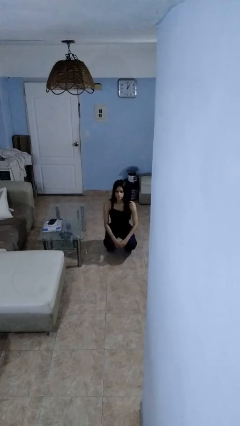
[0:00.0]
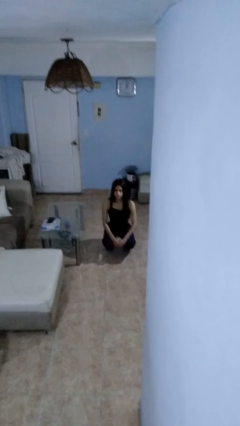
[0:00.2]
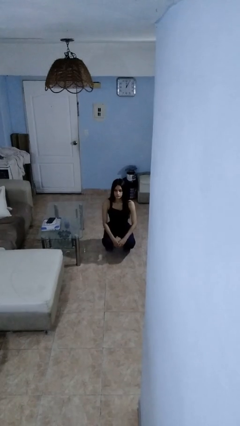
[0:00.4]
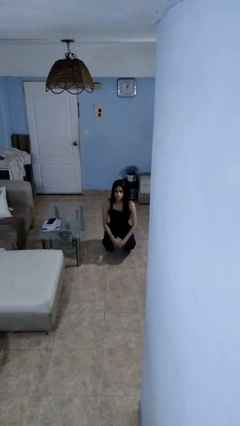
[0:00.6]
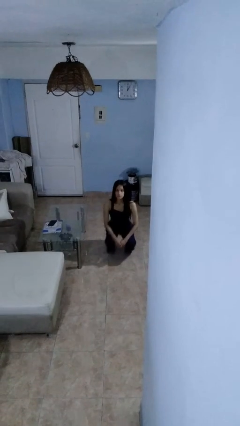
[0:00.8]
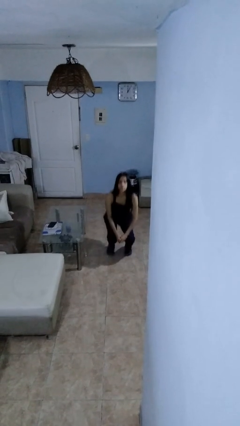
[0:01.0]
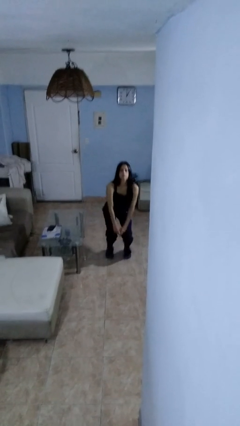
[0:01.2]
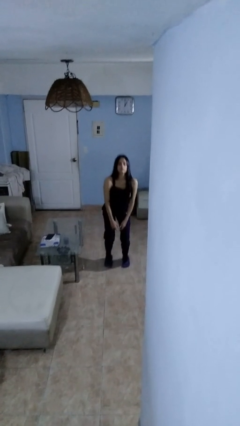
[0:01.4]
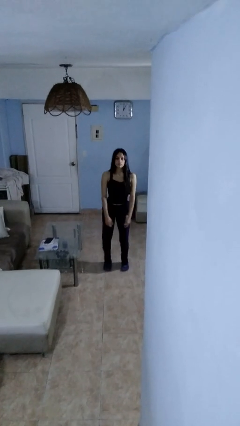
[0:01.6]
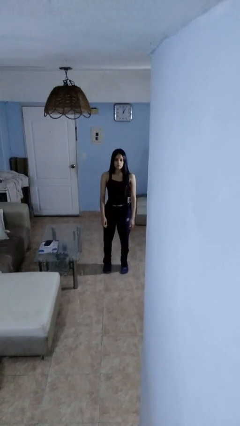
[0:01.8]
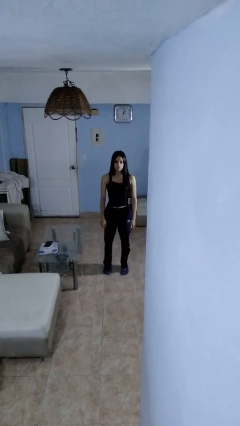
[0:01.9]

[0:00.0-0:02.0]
person stands up

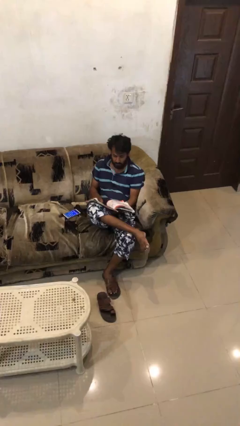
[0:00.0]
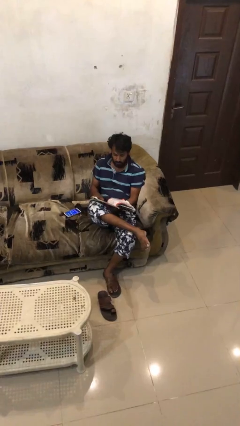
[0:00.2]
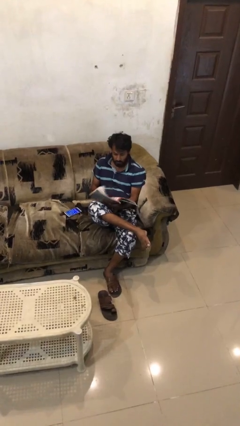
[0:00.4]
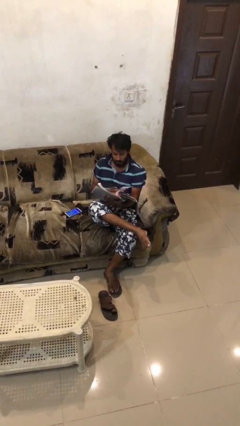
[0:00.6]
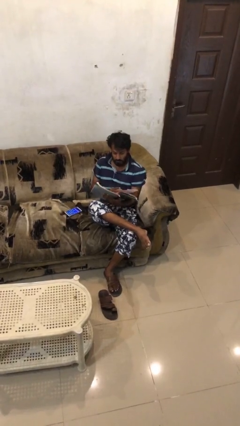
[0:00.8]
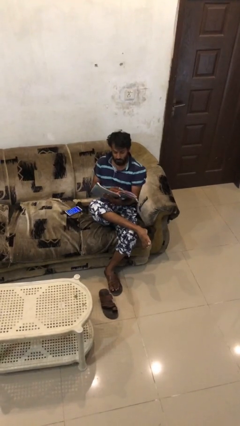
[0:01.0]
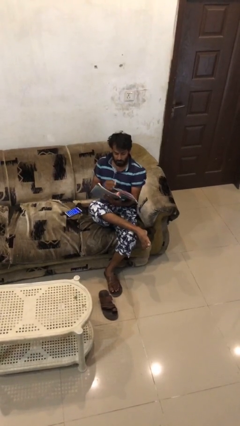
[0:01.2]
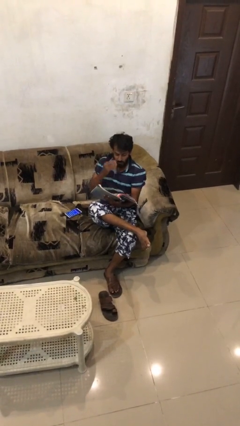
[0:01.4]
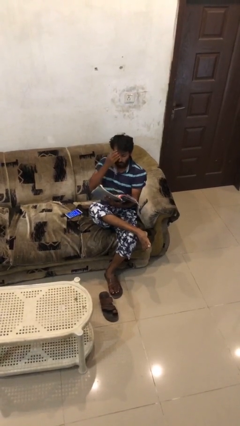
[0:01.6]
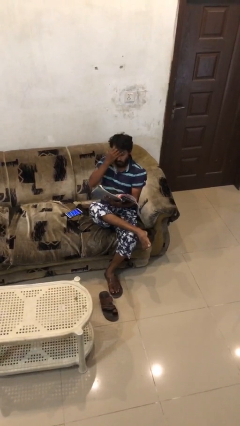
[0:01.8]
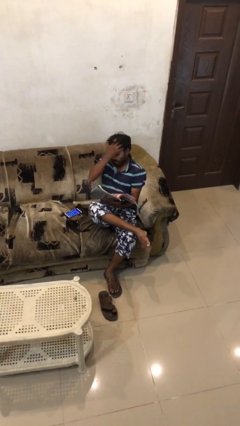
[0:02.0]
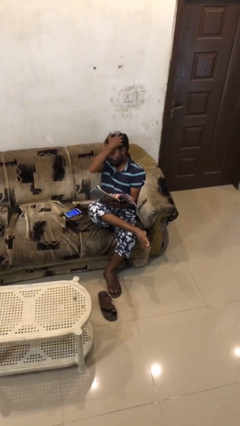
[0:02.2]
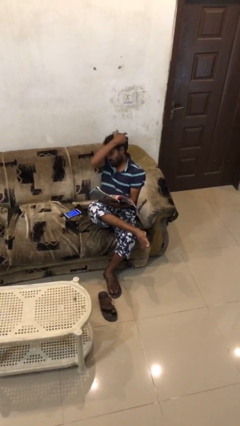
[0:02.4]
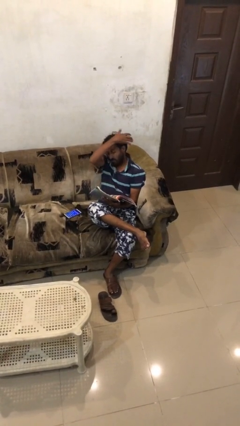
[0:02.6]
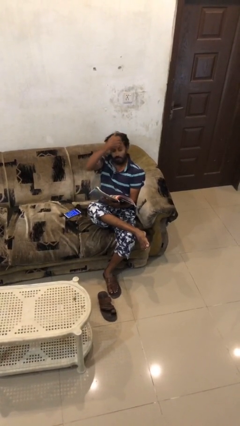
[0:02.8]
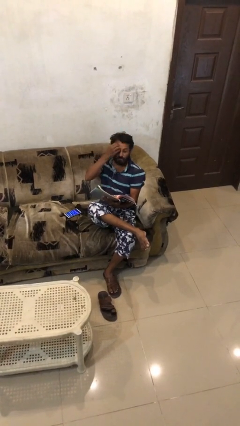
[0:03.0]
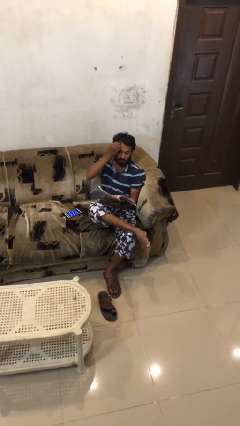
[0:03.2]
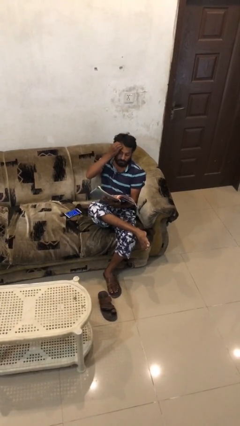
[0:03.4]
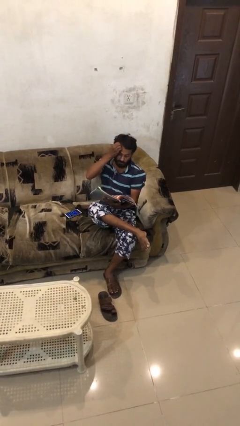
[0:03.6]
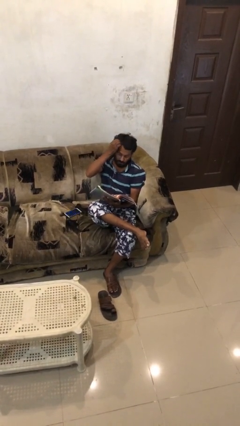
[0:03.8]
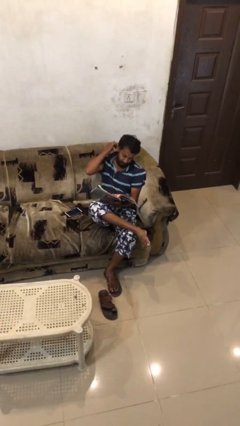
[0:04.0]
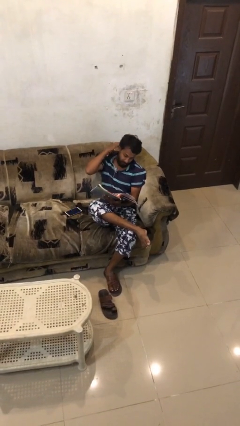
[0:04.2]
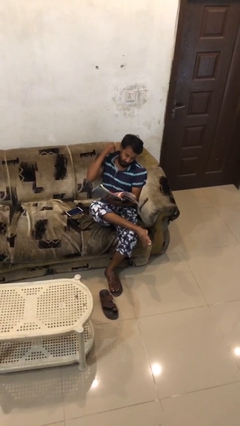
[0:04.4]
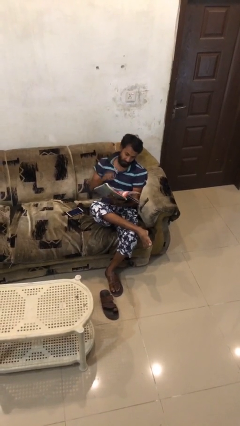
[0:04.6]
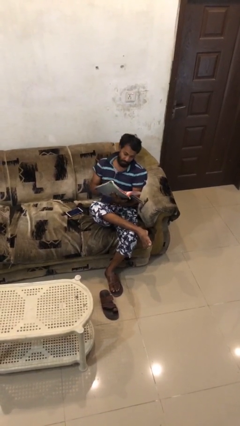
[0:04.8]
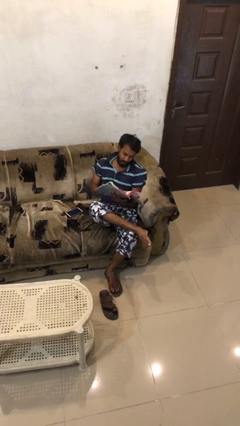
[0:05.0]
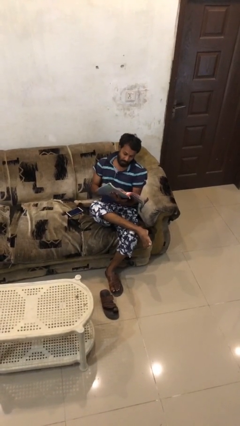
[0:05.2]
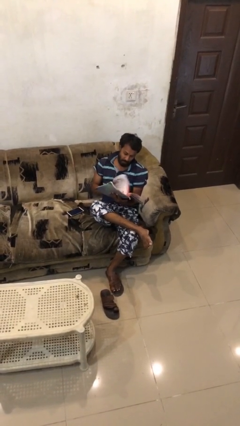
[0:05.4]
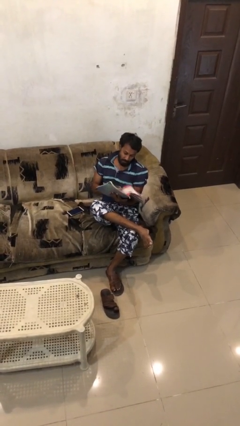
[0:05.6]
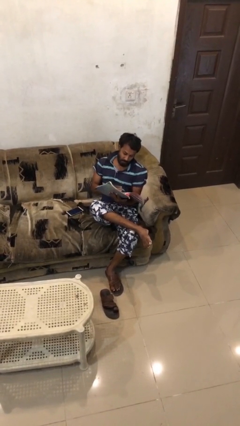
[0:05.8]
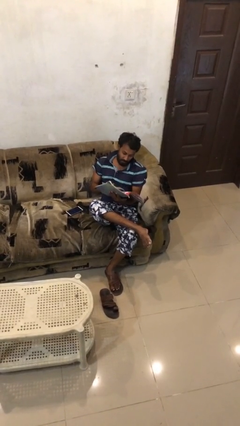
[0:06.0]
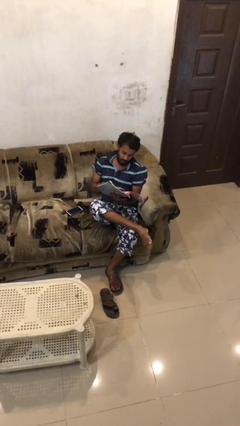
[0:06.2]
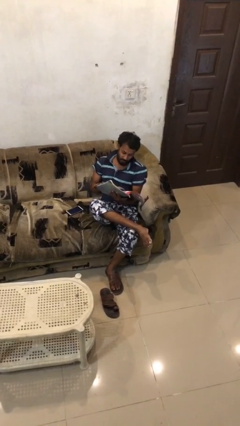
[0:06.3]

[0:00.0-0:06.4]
person reads document

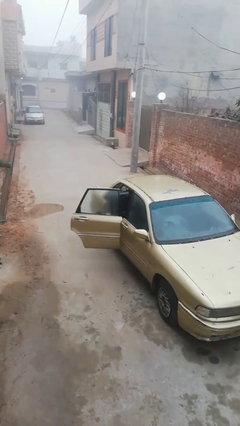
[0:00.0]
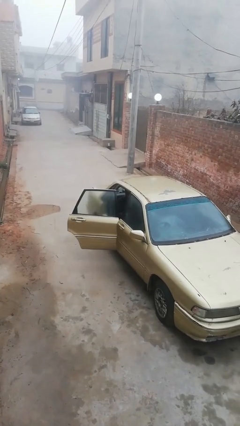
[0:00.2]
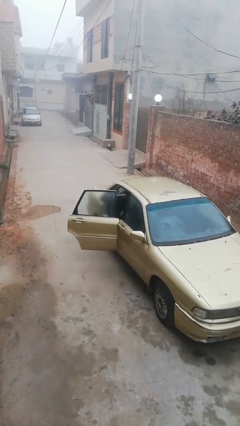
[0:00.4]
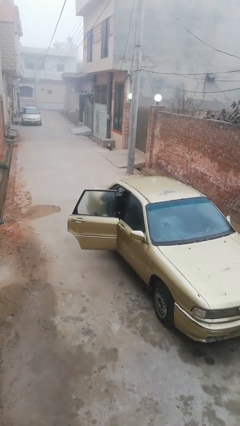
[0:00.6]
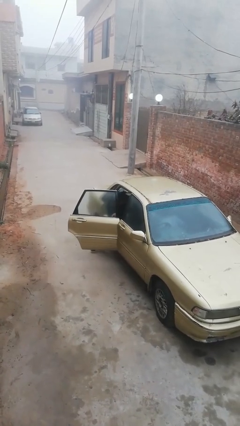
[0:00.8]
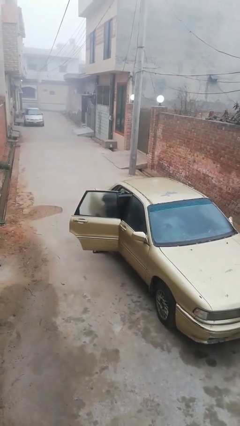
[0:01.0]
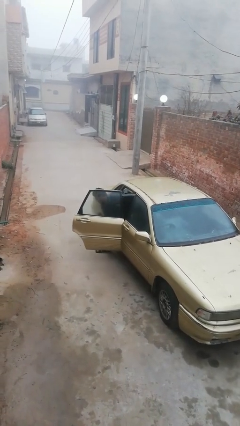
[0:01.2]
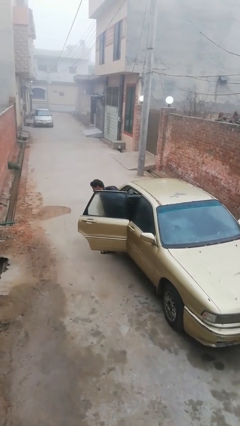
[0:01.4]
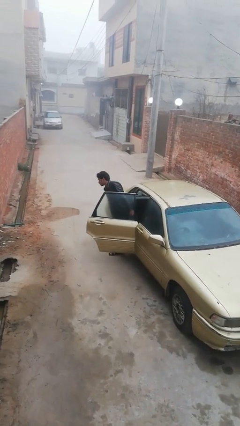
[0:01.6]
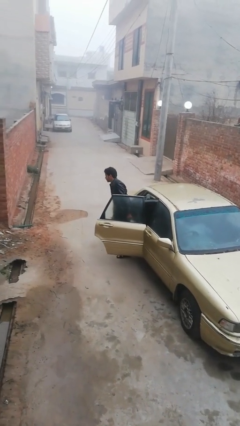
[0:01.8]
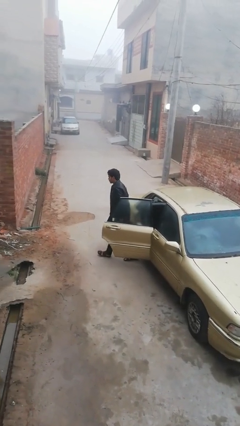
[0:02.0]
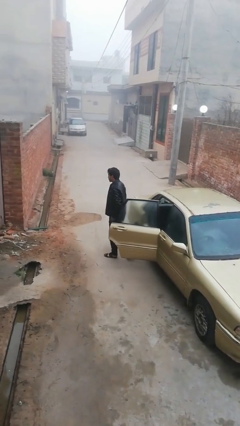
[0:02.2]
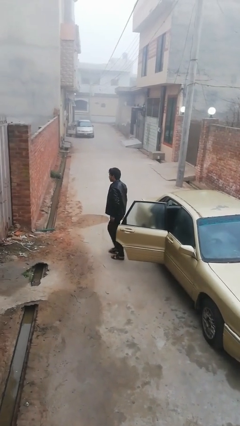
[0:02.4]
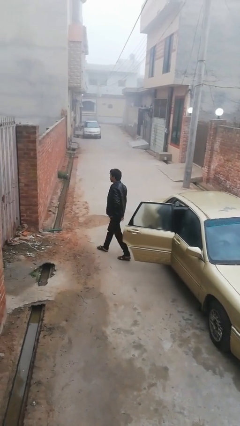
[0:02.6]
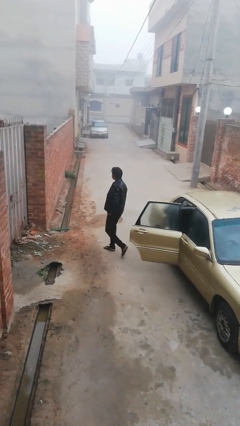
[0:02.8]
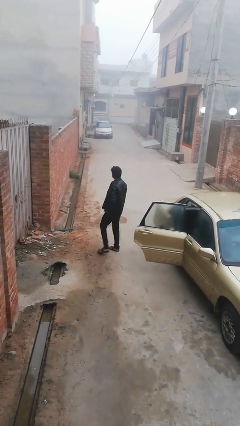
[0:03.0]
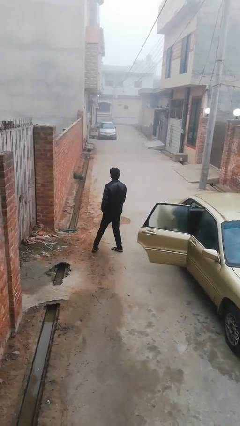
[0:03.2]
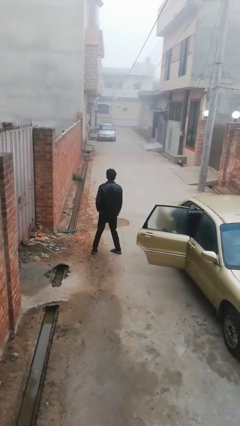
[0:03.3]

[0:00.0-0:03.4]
person exits car

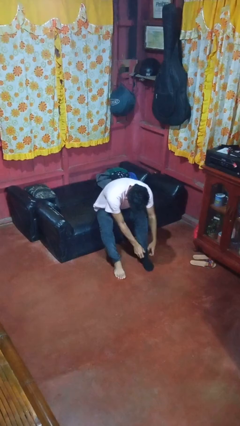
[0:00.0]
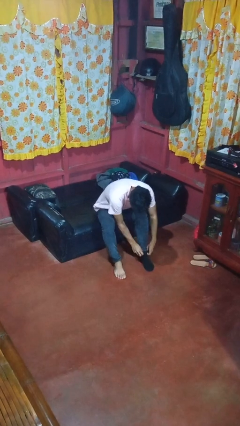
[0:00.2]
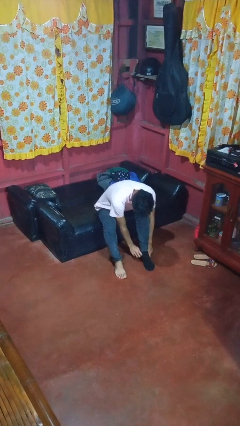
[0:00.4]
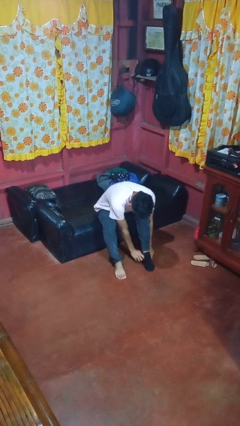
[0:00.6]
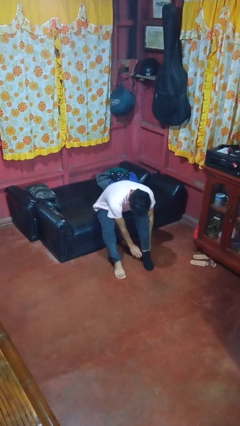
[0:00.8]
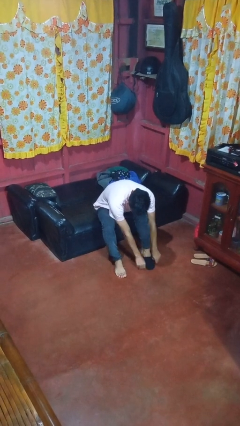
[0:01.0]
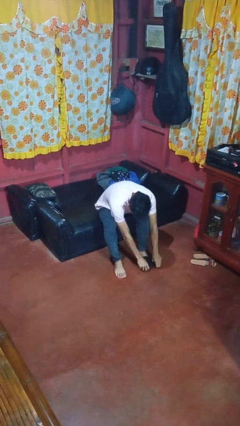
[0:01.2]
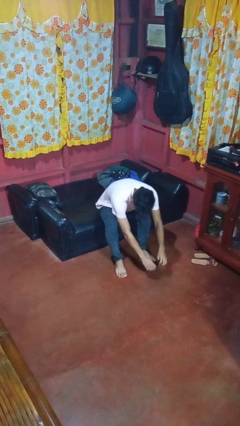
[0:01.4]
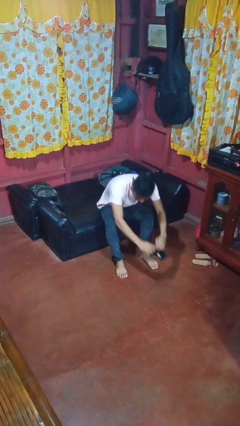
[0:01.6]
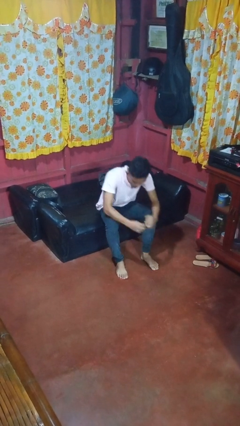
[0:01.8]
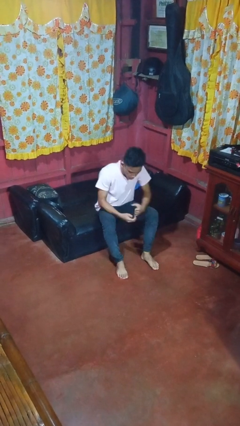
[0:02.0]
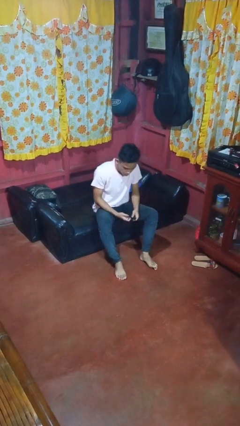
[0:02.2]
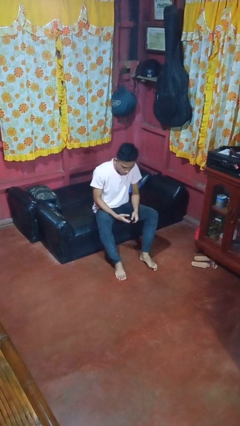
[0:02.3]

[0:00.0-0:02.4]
person takes off socks

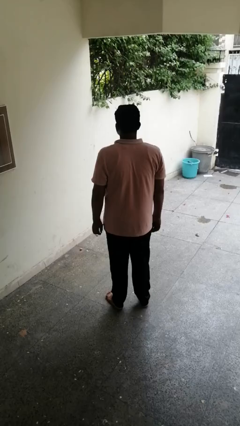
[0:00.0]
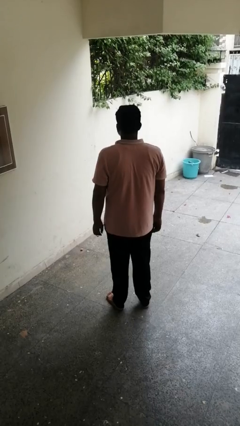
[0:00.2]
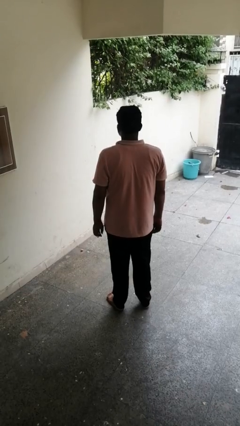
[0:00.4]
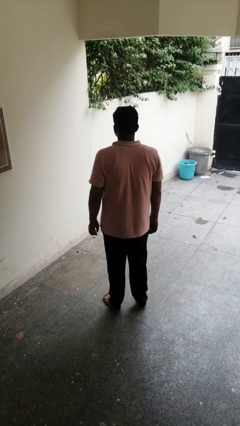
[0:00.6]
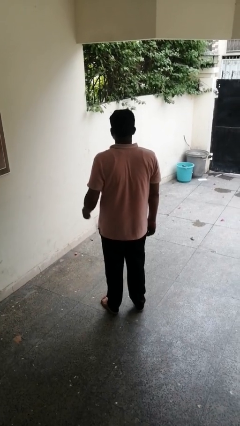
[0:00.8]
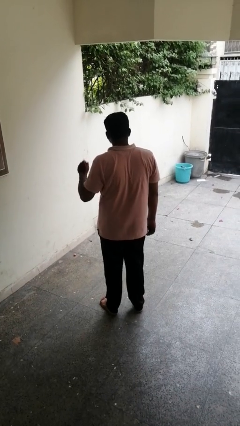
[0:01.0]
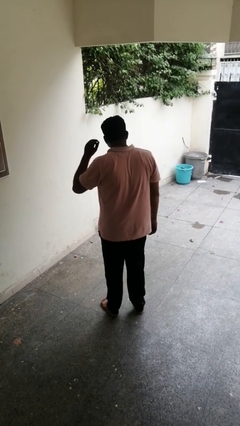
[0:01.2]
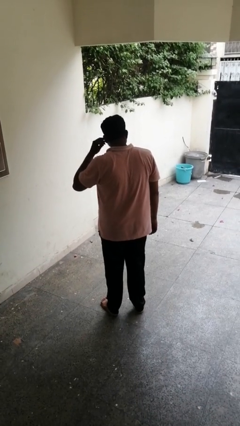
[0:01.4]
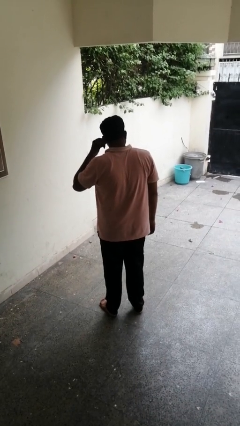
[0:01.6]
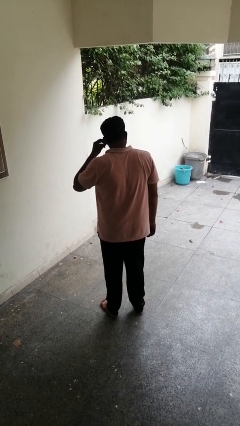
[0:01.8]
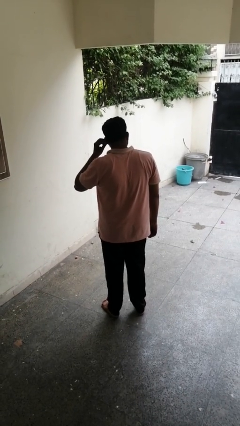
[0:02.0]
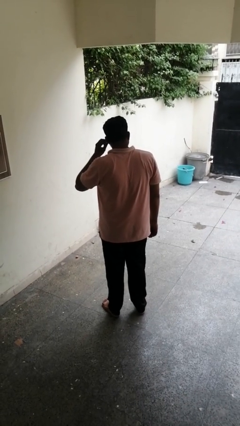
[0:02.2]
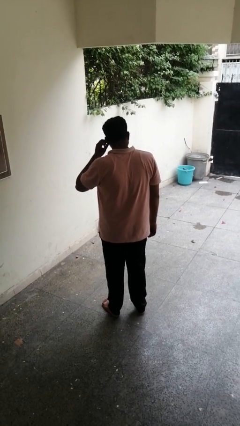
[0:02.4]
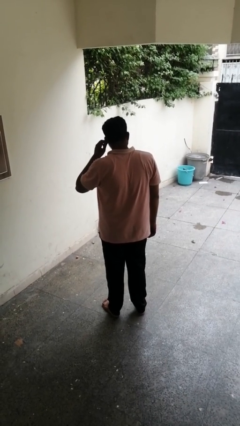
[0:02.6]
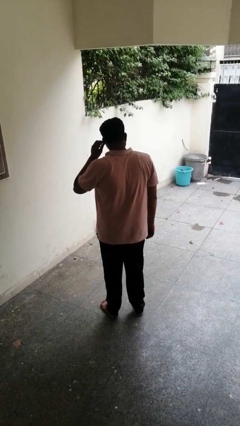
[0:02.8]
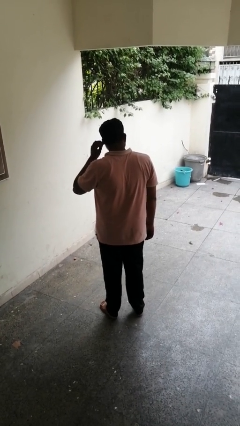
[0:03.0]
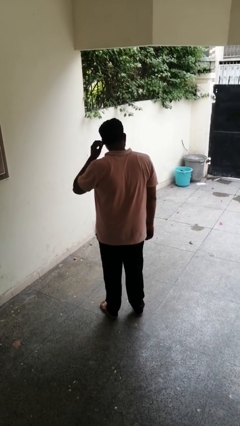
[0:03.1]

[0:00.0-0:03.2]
person touches earlobe

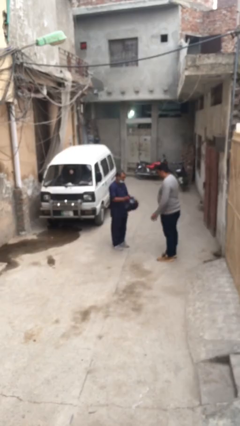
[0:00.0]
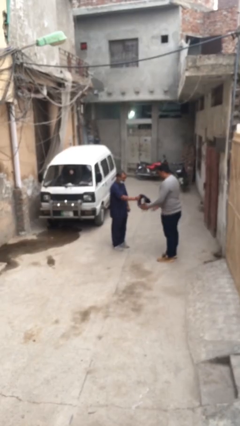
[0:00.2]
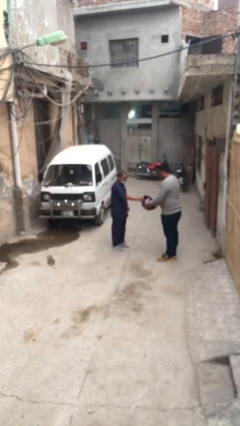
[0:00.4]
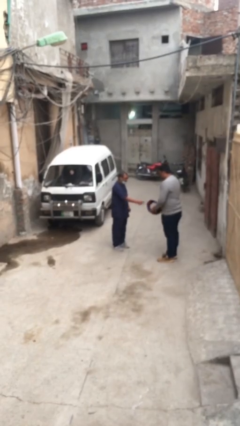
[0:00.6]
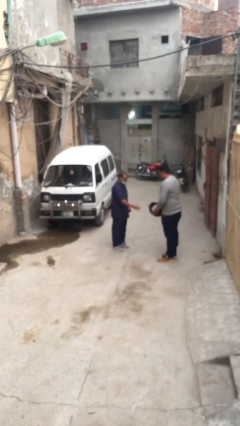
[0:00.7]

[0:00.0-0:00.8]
person transfers object to person
